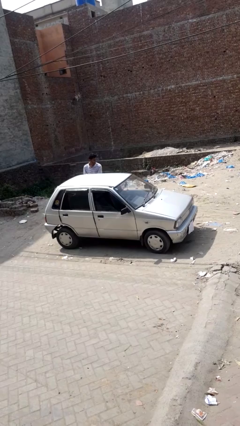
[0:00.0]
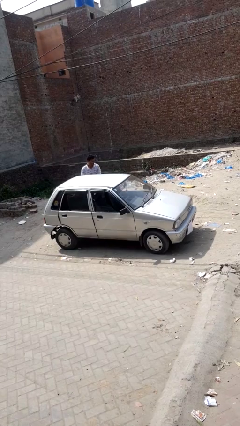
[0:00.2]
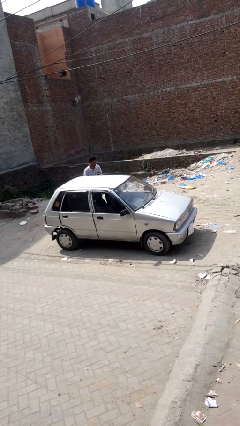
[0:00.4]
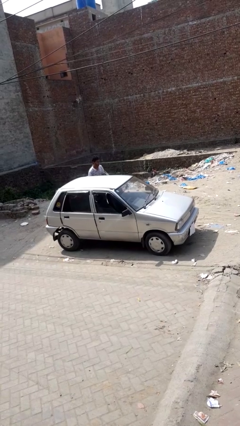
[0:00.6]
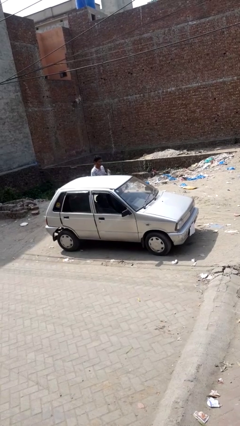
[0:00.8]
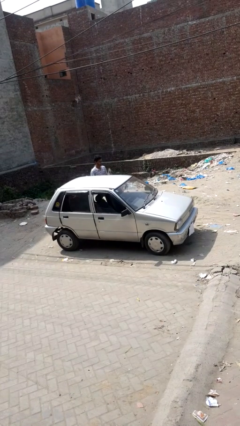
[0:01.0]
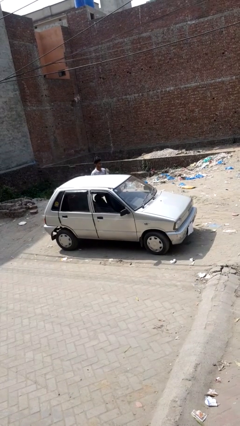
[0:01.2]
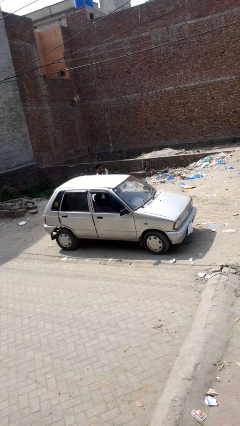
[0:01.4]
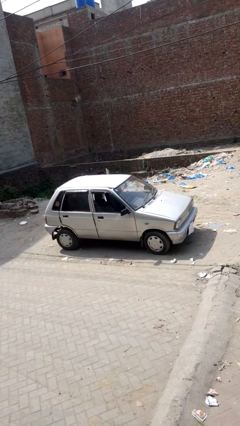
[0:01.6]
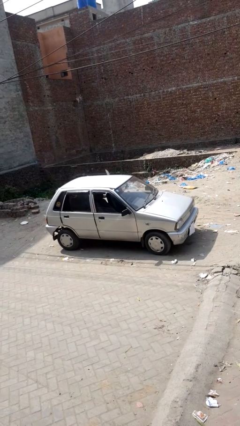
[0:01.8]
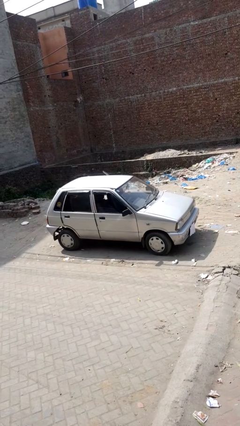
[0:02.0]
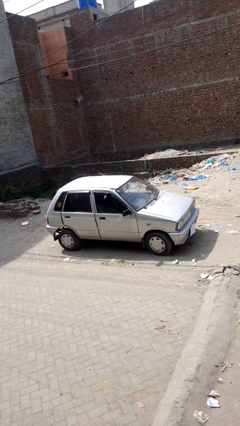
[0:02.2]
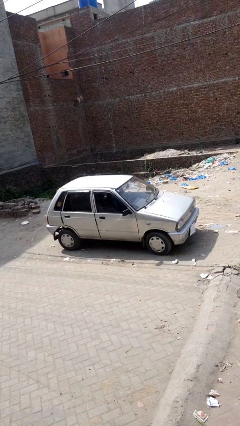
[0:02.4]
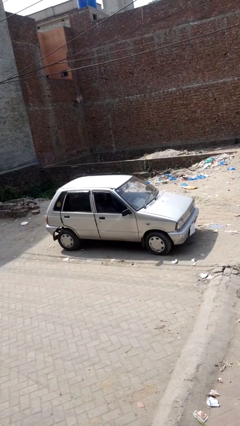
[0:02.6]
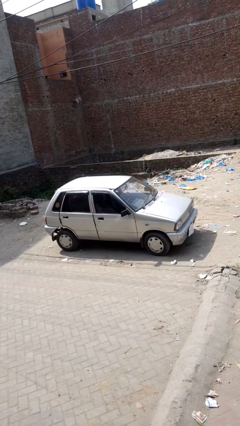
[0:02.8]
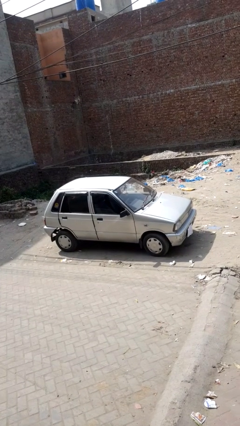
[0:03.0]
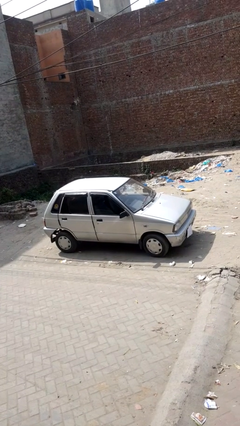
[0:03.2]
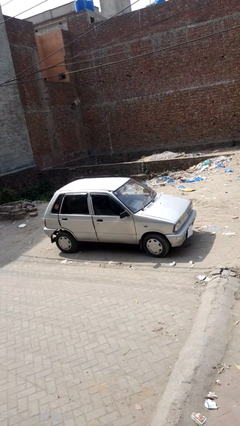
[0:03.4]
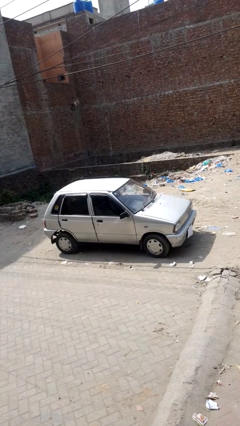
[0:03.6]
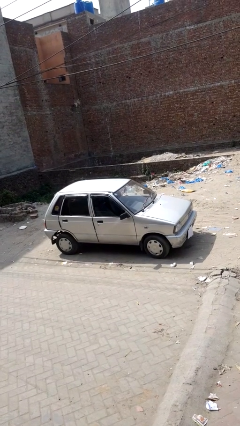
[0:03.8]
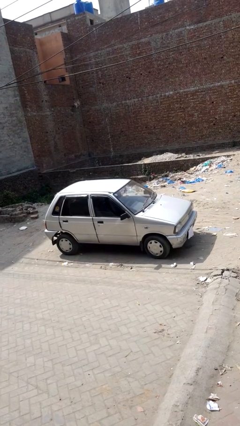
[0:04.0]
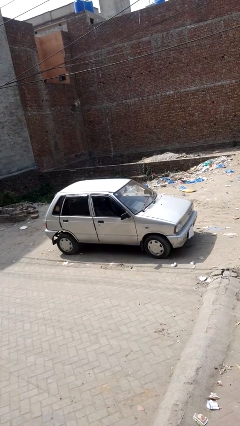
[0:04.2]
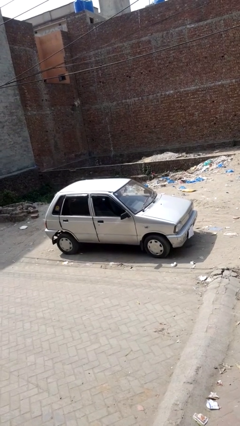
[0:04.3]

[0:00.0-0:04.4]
car picks up person

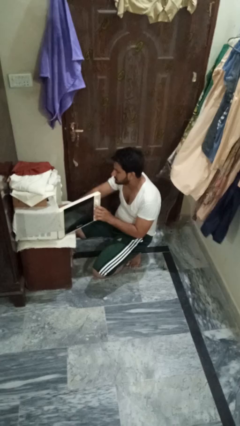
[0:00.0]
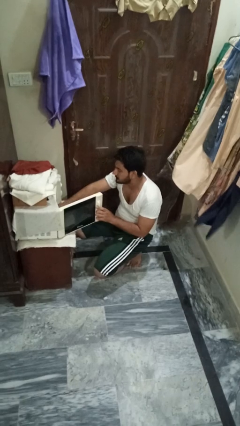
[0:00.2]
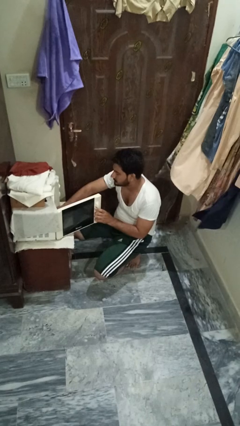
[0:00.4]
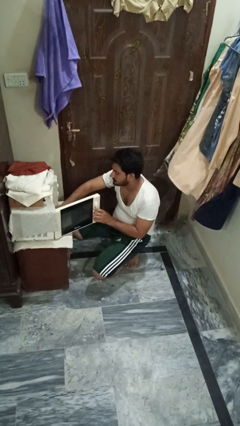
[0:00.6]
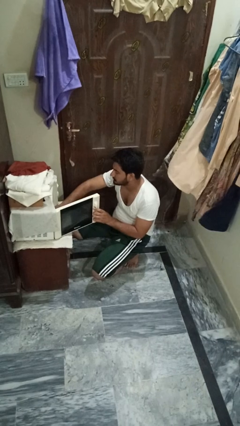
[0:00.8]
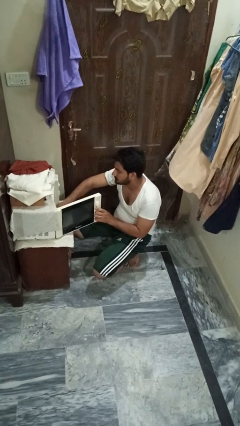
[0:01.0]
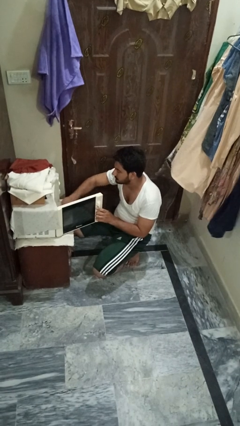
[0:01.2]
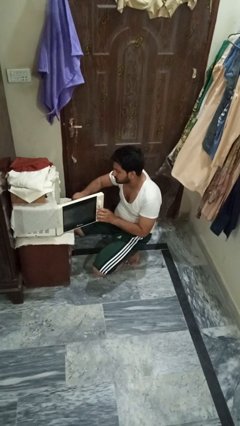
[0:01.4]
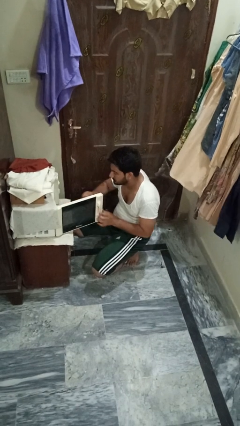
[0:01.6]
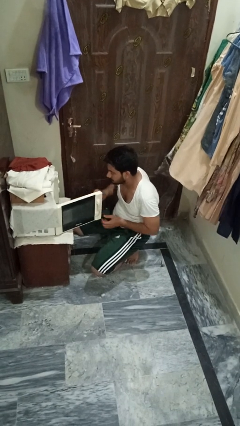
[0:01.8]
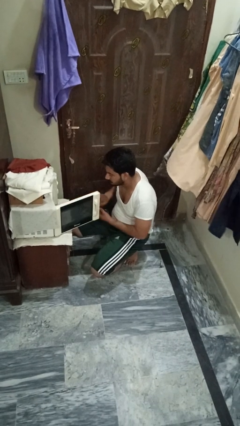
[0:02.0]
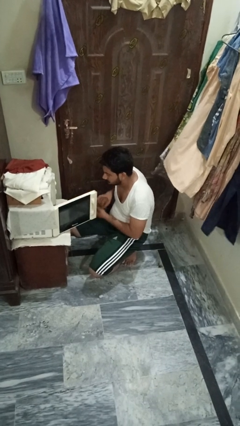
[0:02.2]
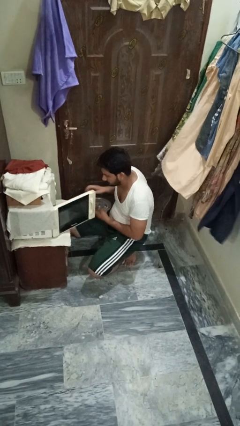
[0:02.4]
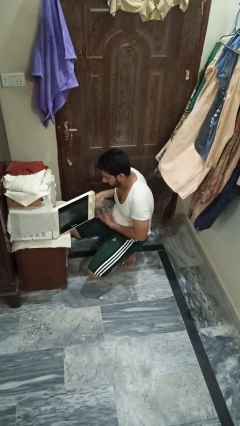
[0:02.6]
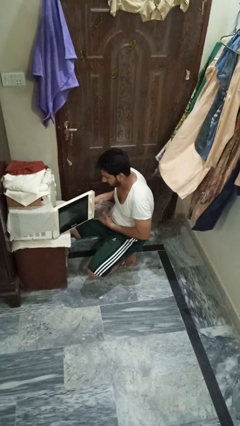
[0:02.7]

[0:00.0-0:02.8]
person takes object from oven

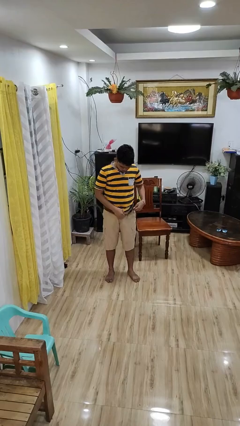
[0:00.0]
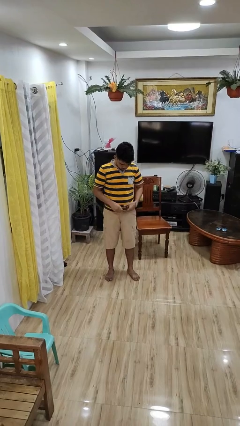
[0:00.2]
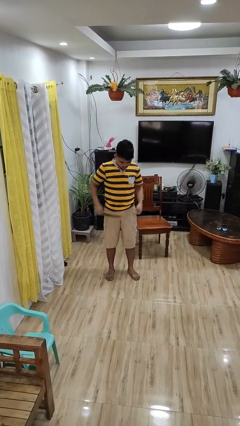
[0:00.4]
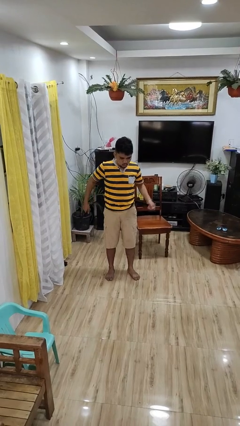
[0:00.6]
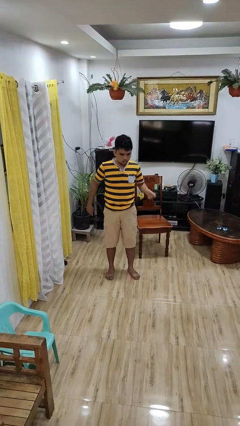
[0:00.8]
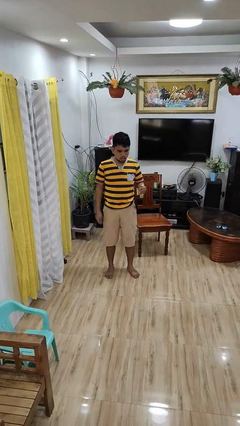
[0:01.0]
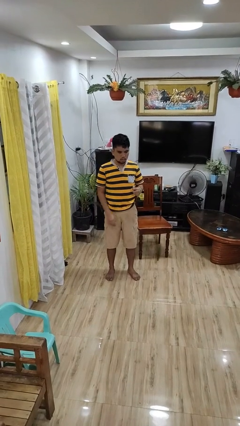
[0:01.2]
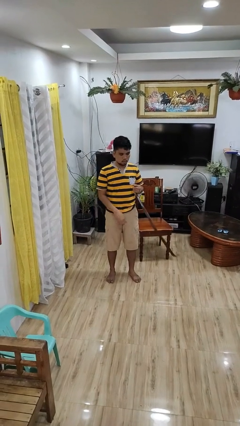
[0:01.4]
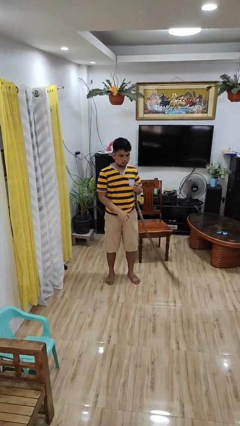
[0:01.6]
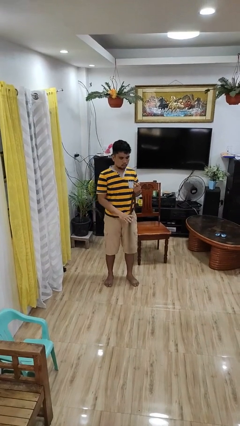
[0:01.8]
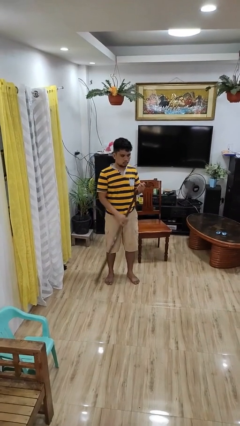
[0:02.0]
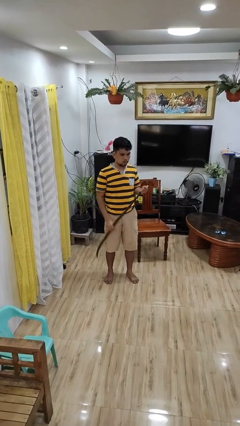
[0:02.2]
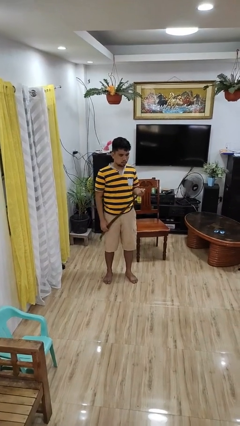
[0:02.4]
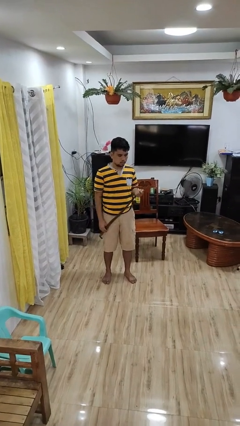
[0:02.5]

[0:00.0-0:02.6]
person takes off belt

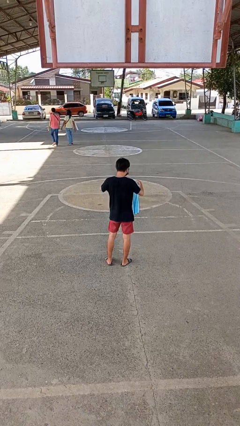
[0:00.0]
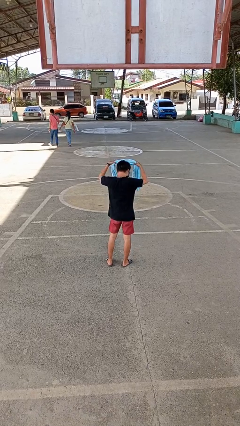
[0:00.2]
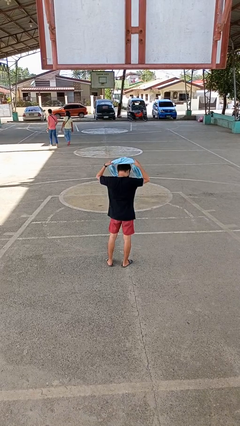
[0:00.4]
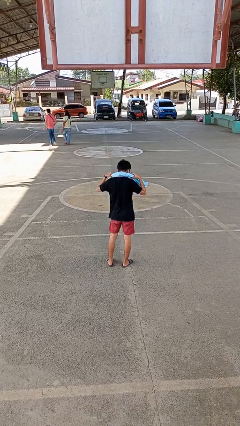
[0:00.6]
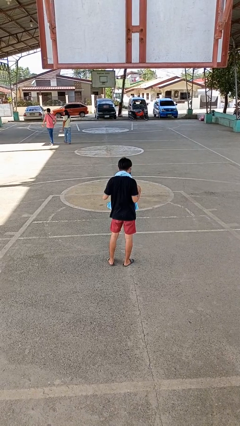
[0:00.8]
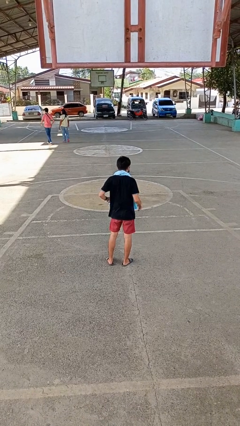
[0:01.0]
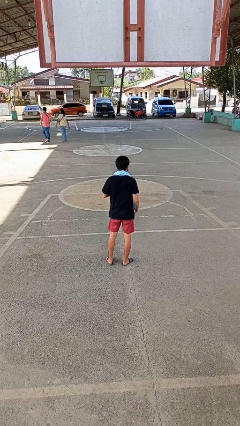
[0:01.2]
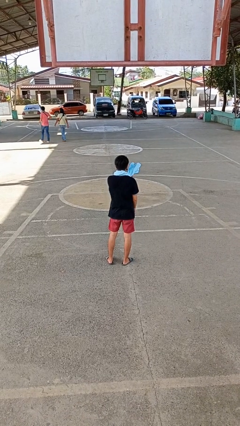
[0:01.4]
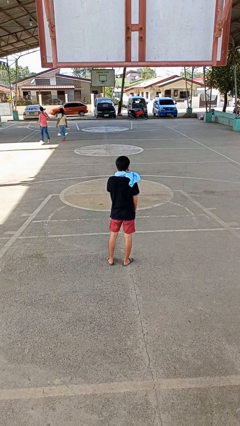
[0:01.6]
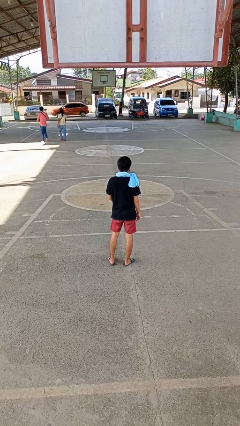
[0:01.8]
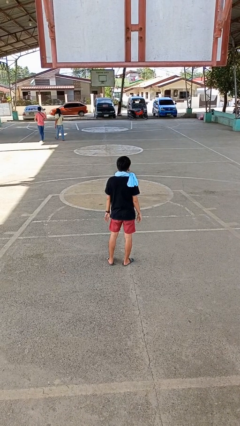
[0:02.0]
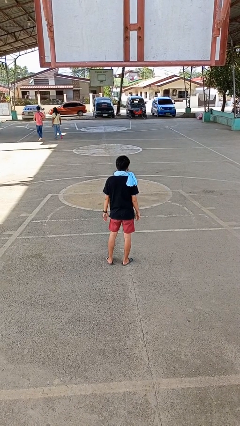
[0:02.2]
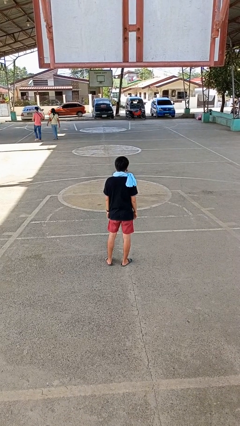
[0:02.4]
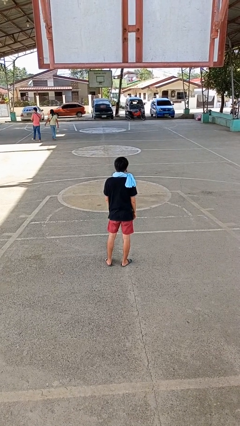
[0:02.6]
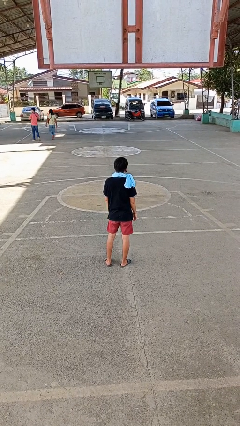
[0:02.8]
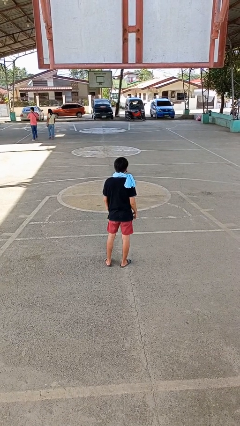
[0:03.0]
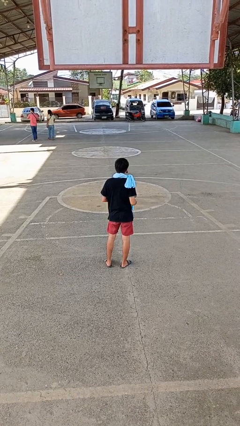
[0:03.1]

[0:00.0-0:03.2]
person puts on scarf

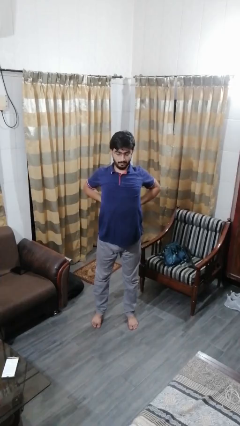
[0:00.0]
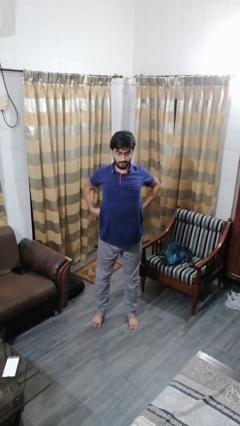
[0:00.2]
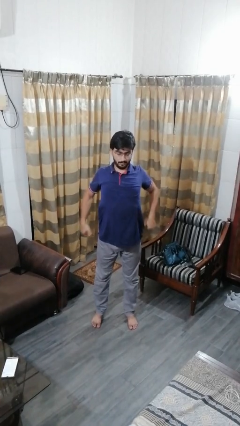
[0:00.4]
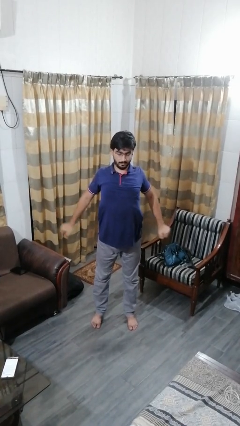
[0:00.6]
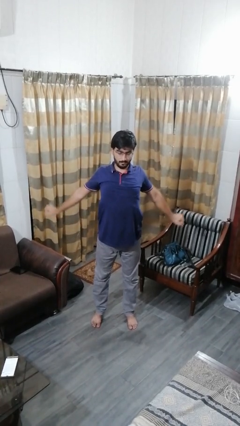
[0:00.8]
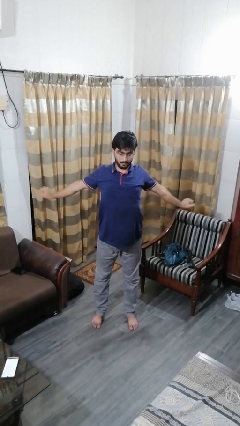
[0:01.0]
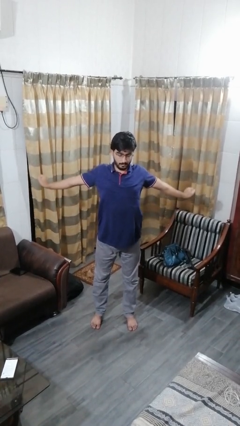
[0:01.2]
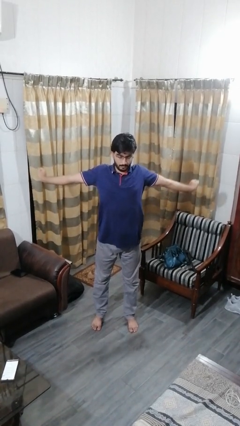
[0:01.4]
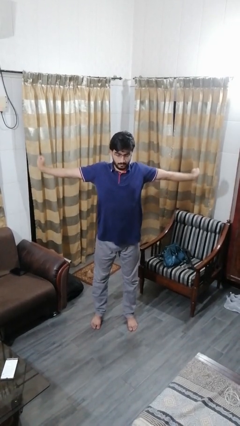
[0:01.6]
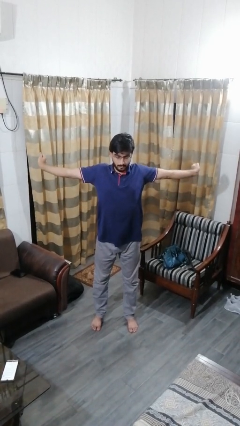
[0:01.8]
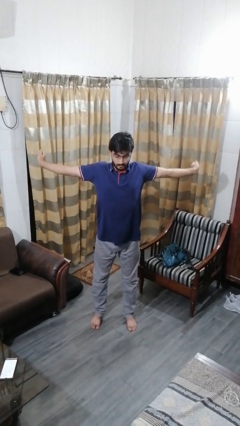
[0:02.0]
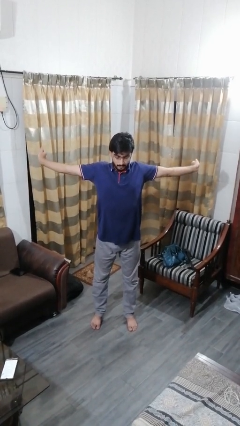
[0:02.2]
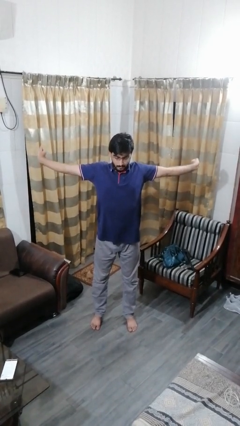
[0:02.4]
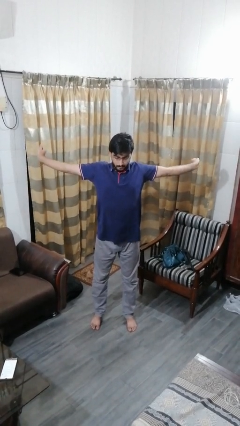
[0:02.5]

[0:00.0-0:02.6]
person stretches arms to side

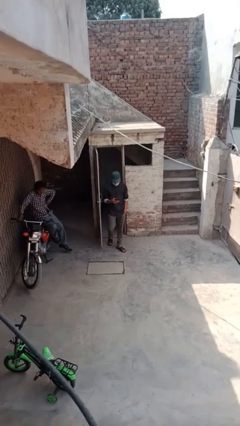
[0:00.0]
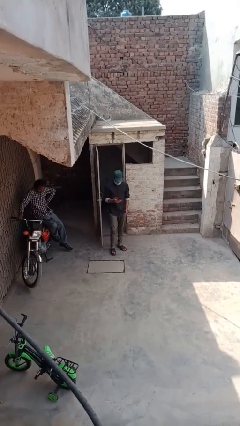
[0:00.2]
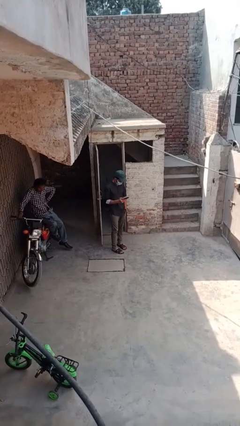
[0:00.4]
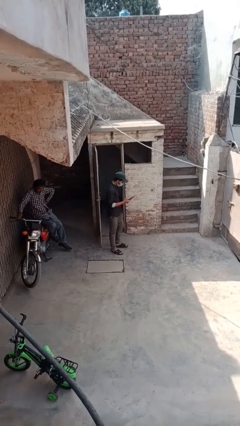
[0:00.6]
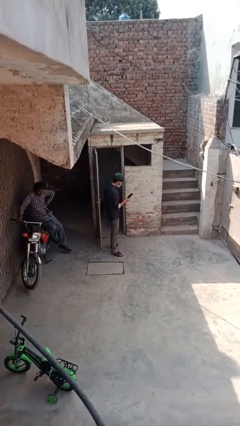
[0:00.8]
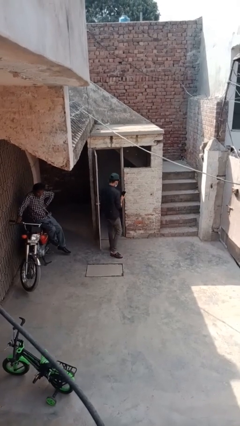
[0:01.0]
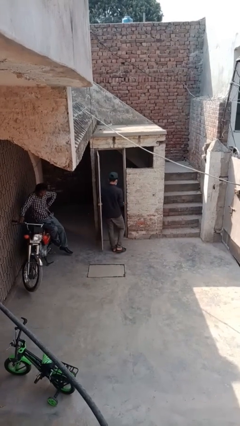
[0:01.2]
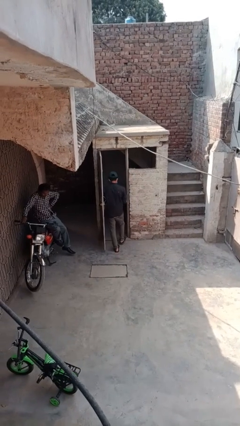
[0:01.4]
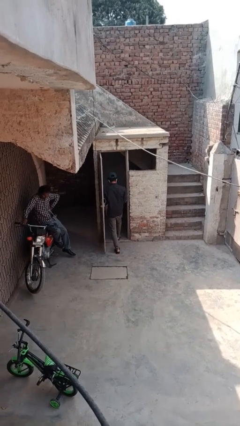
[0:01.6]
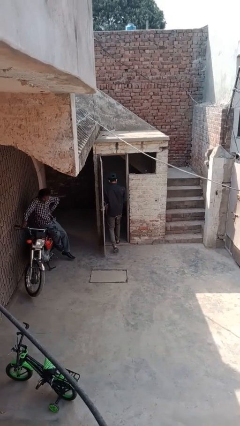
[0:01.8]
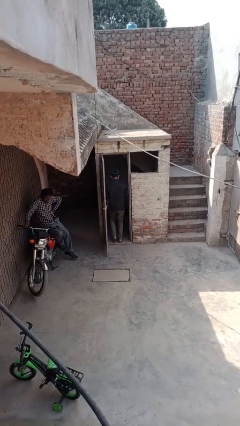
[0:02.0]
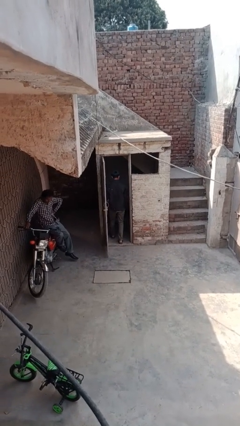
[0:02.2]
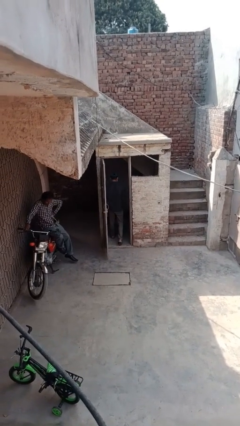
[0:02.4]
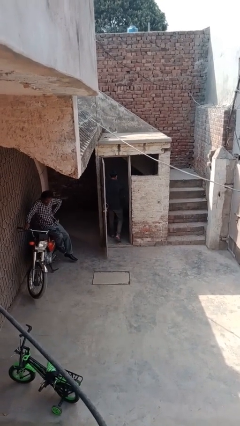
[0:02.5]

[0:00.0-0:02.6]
person exits scene through structure
